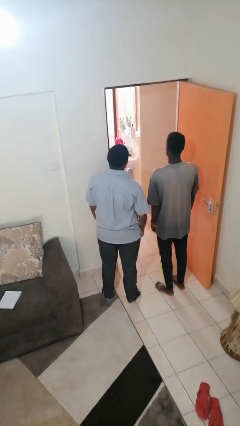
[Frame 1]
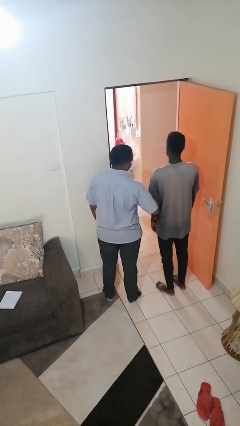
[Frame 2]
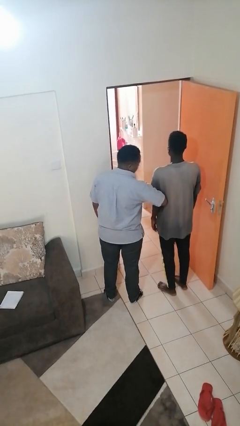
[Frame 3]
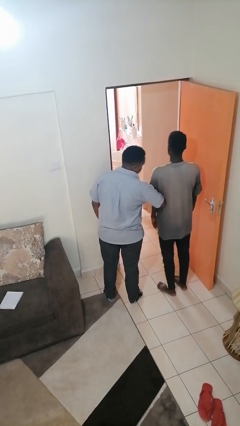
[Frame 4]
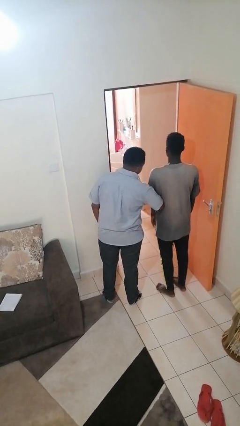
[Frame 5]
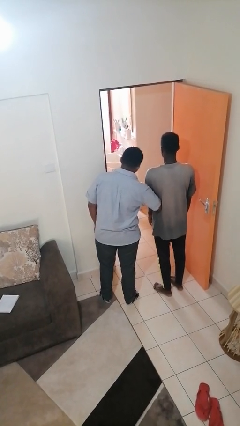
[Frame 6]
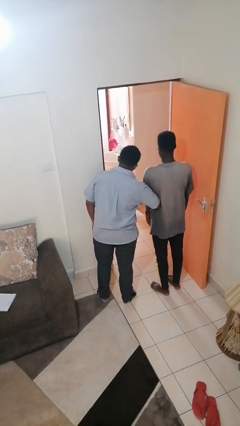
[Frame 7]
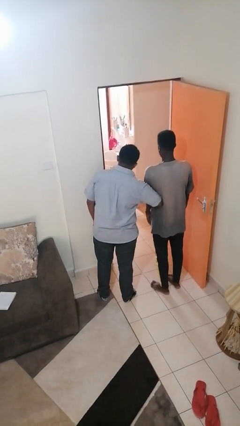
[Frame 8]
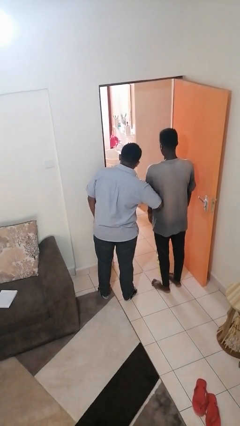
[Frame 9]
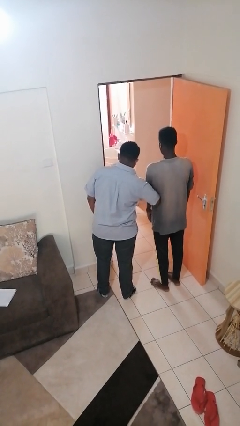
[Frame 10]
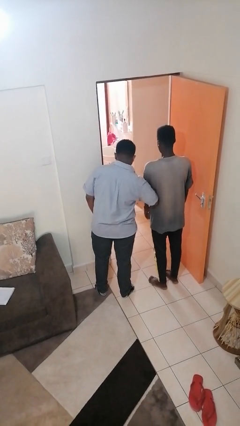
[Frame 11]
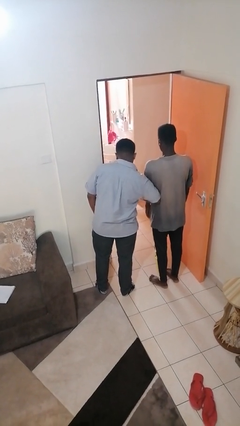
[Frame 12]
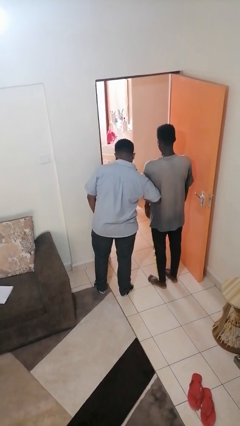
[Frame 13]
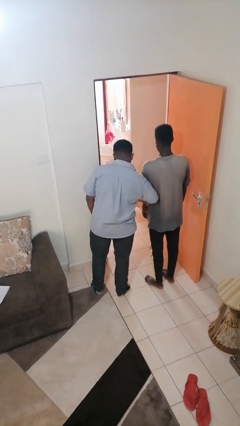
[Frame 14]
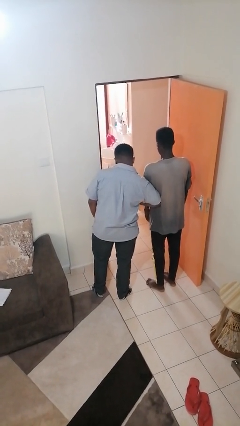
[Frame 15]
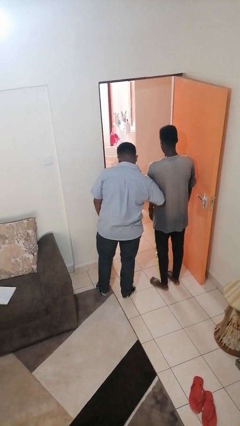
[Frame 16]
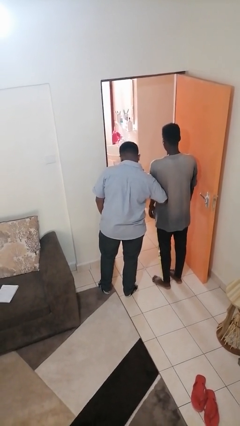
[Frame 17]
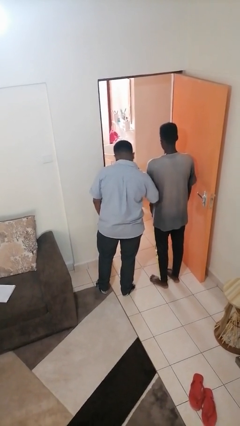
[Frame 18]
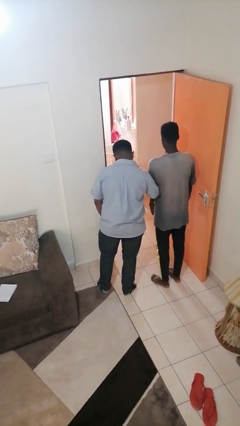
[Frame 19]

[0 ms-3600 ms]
person nudges person with elbow

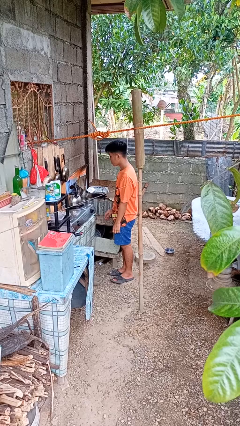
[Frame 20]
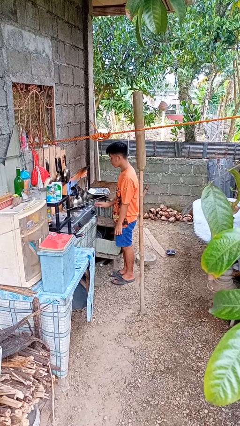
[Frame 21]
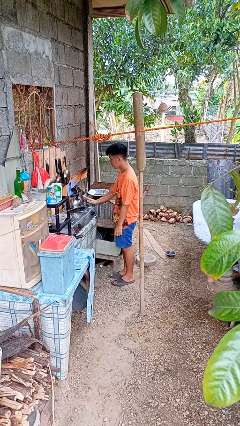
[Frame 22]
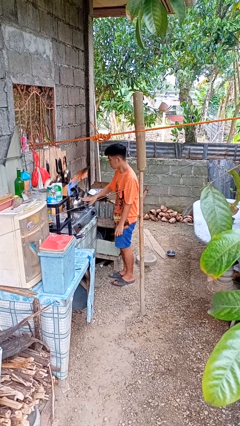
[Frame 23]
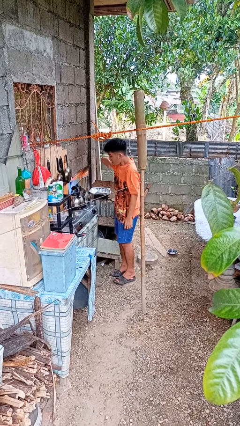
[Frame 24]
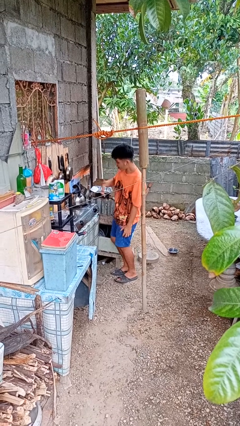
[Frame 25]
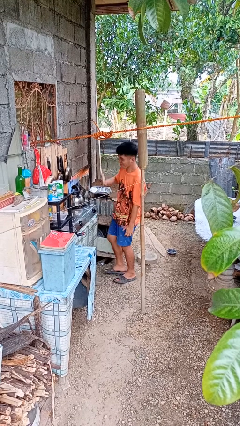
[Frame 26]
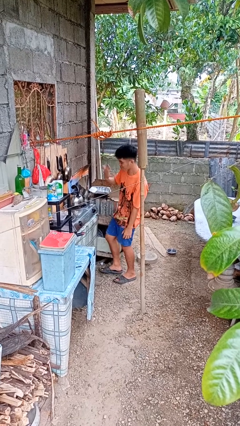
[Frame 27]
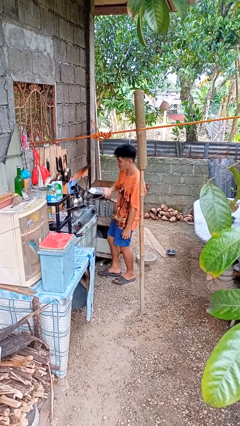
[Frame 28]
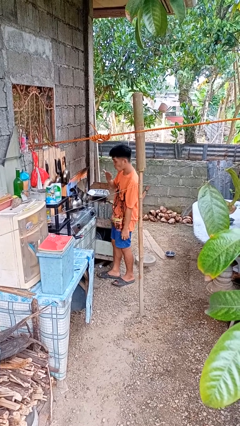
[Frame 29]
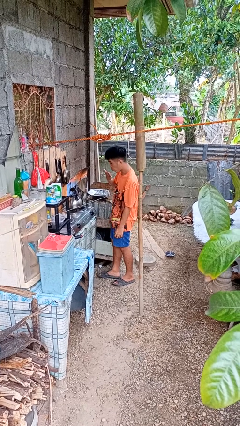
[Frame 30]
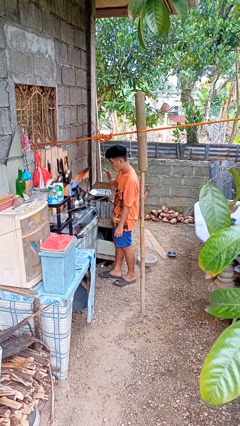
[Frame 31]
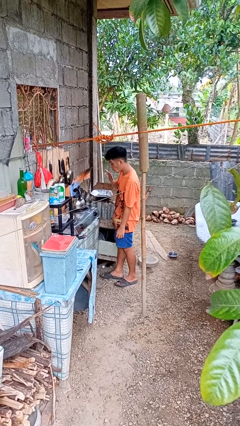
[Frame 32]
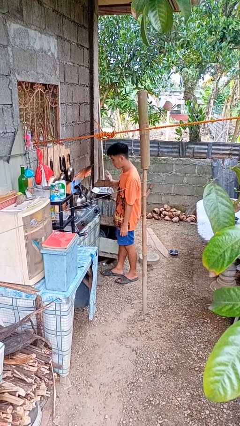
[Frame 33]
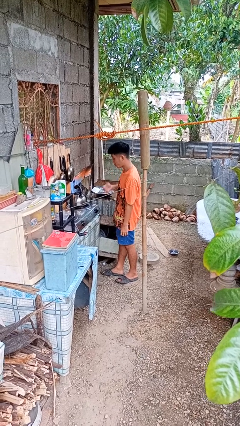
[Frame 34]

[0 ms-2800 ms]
person burns hand

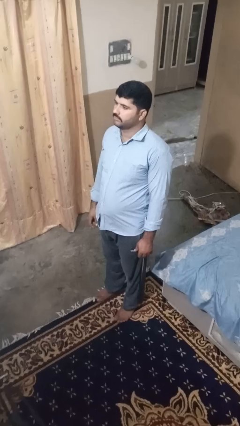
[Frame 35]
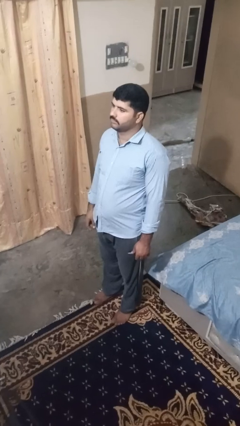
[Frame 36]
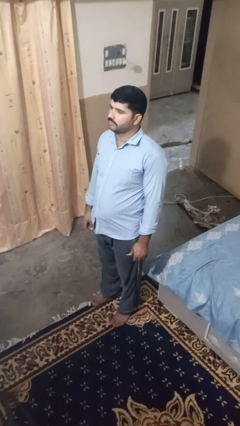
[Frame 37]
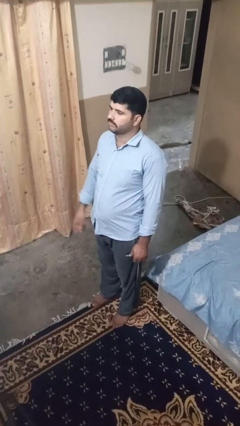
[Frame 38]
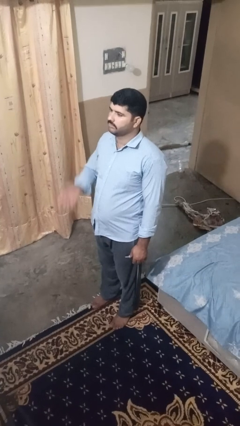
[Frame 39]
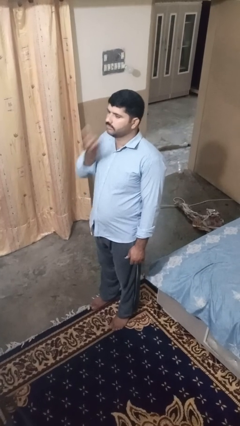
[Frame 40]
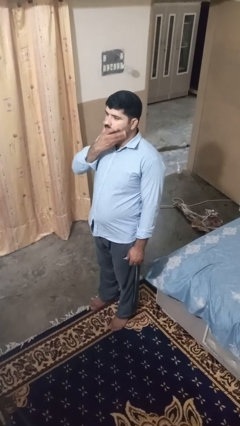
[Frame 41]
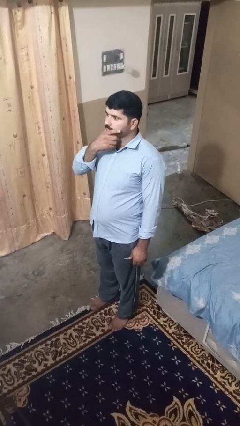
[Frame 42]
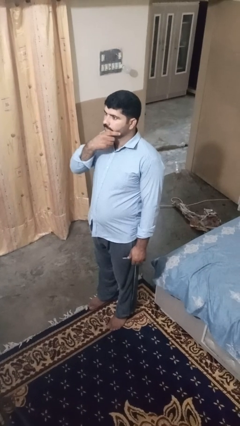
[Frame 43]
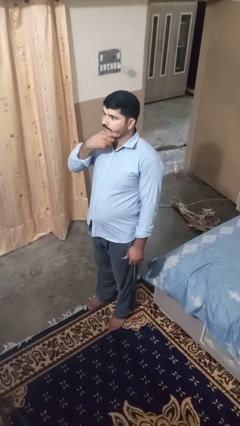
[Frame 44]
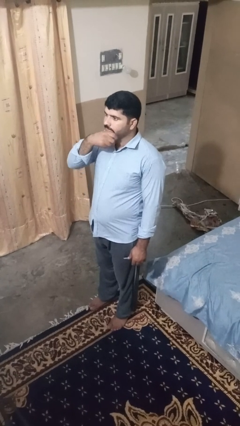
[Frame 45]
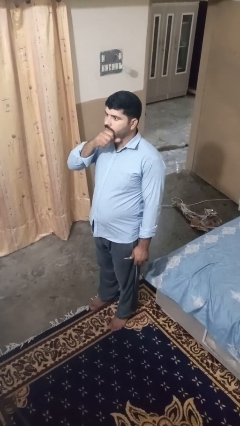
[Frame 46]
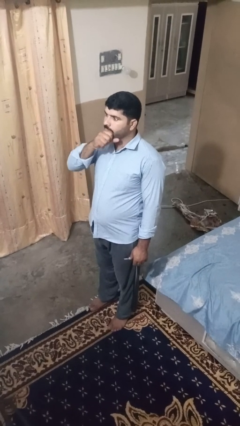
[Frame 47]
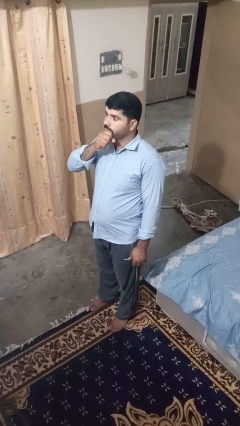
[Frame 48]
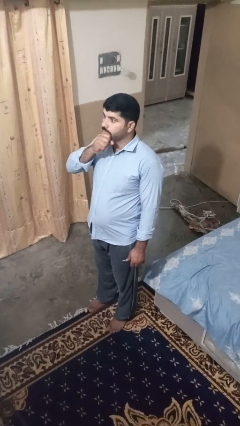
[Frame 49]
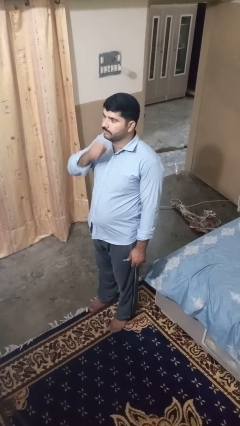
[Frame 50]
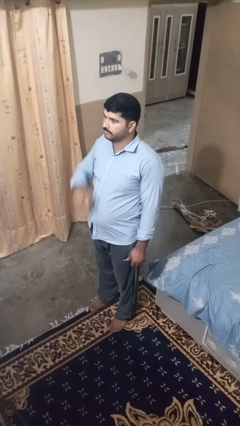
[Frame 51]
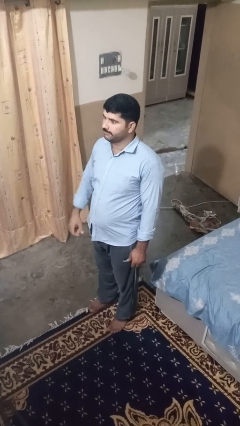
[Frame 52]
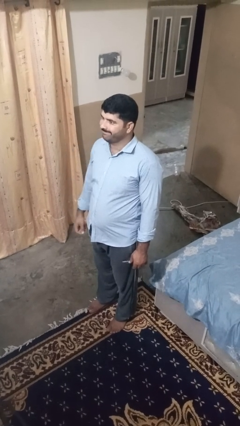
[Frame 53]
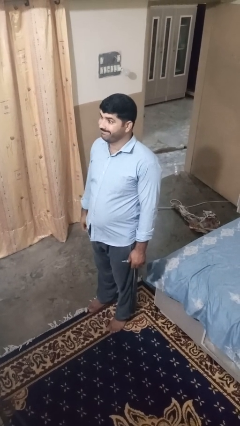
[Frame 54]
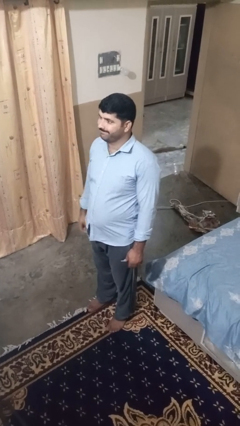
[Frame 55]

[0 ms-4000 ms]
person strokes chin

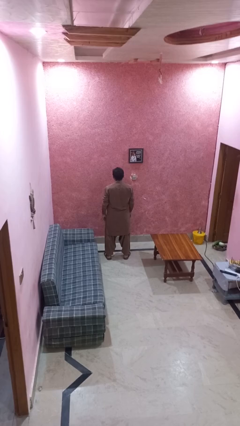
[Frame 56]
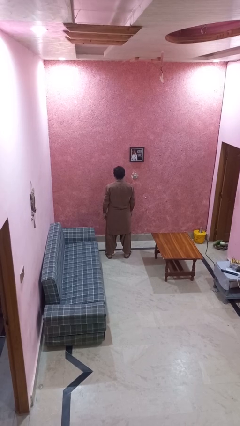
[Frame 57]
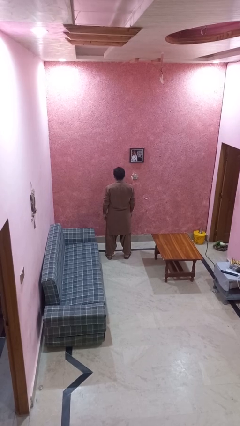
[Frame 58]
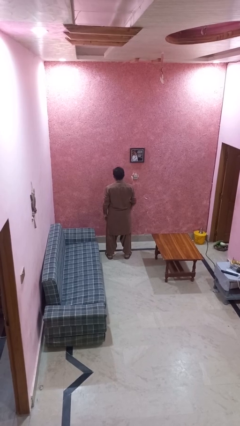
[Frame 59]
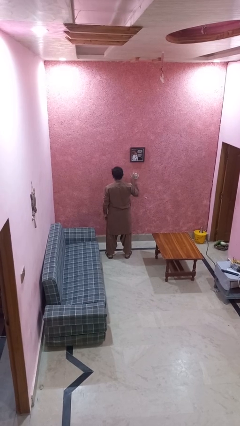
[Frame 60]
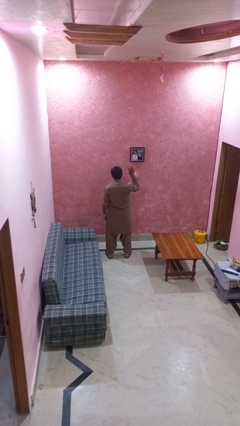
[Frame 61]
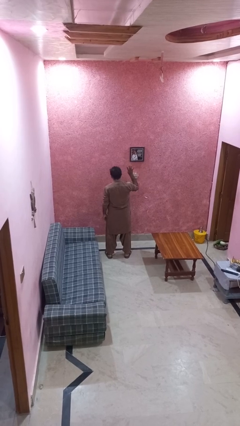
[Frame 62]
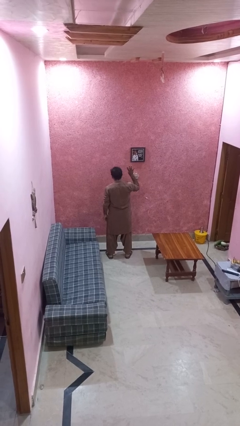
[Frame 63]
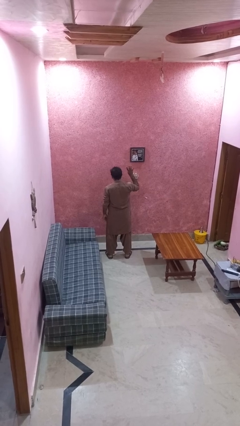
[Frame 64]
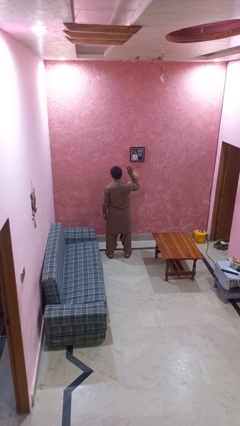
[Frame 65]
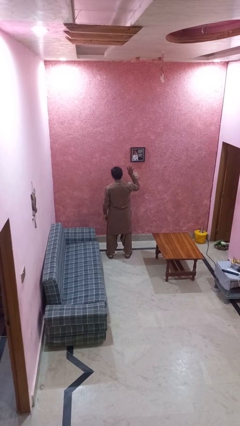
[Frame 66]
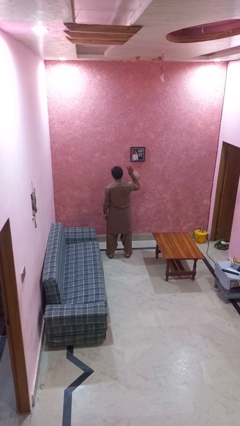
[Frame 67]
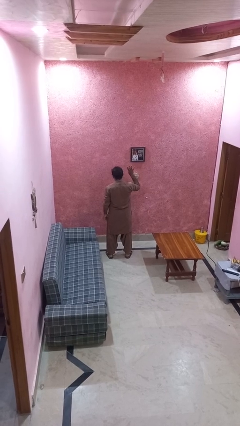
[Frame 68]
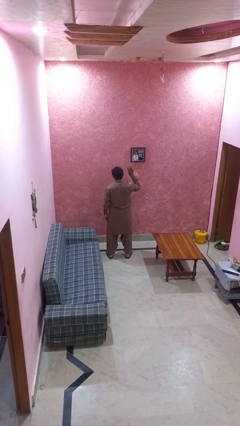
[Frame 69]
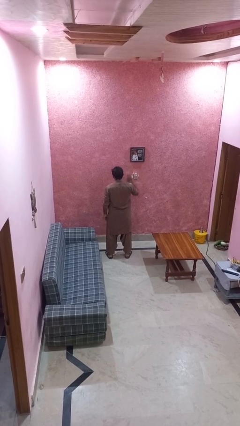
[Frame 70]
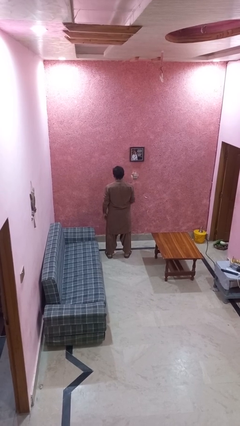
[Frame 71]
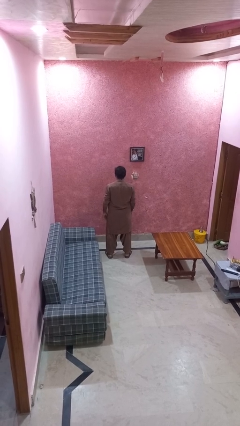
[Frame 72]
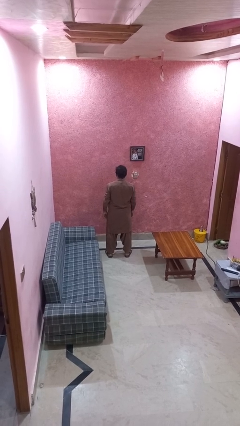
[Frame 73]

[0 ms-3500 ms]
person gestures number four

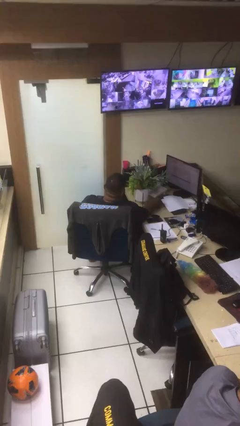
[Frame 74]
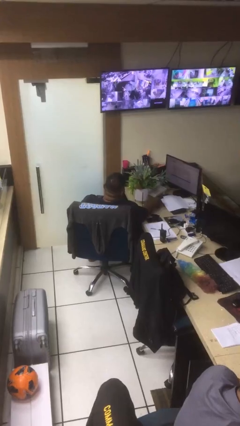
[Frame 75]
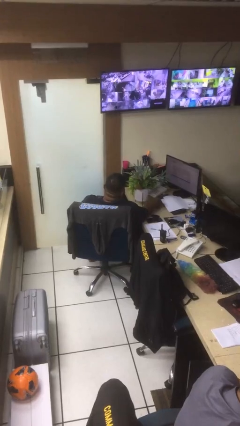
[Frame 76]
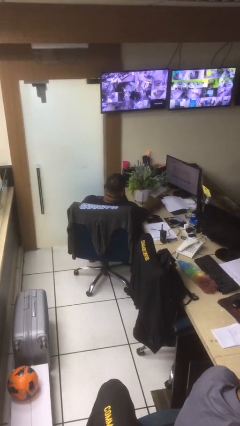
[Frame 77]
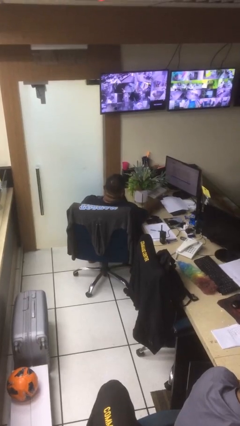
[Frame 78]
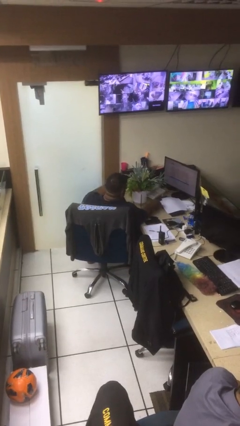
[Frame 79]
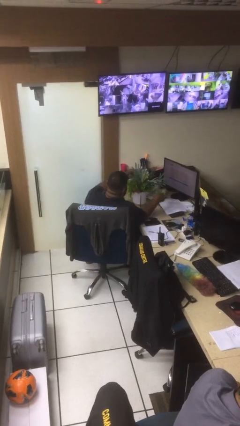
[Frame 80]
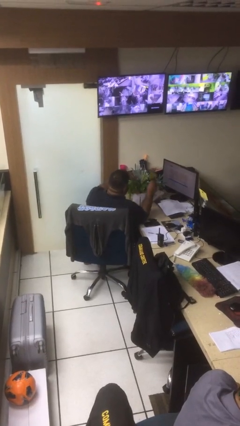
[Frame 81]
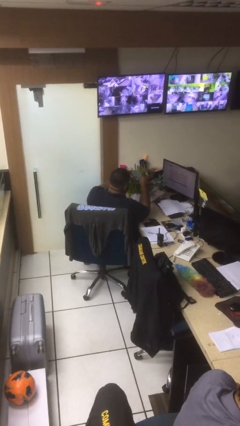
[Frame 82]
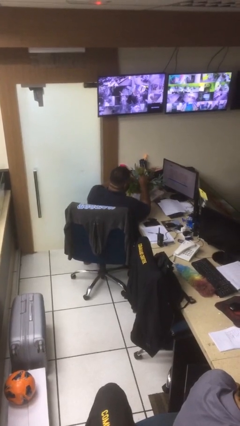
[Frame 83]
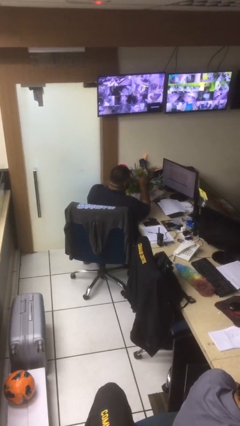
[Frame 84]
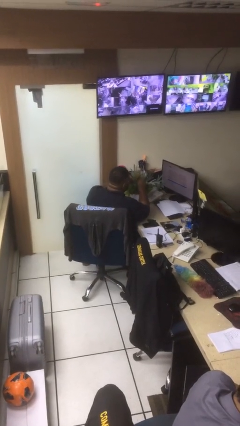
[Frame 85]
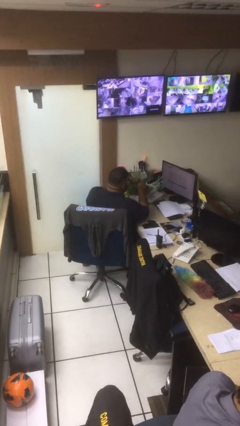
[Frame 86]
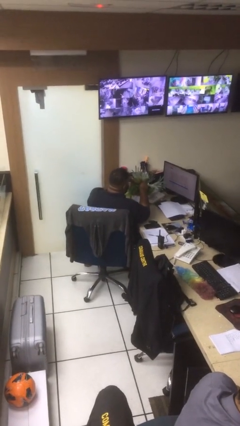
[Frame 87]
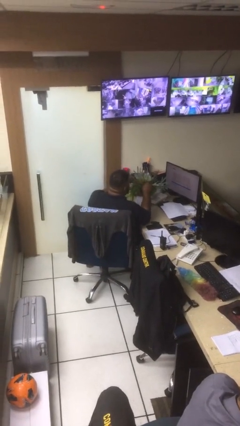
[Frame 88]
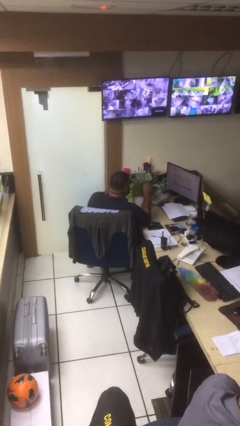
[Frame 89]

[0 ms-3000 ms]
person arranges flowers in vase

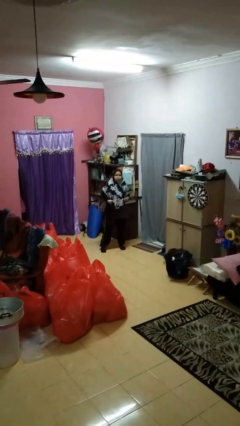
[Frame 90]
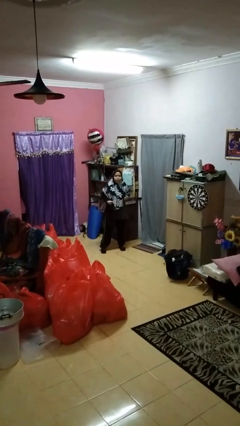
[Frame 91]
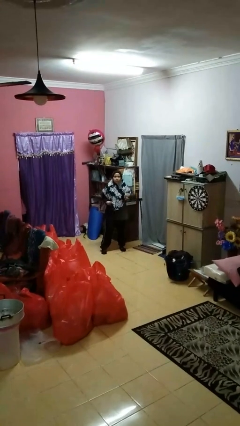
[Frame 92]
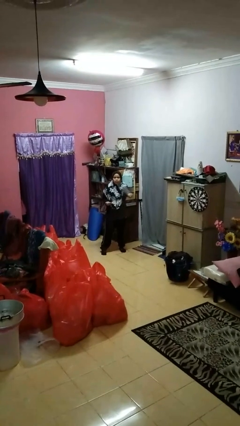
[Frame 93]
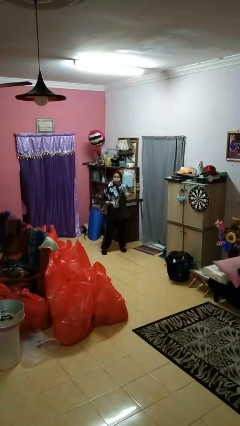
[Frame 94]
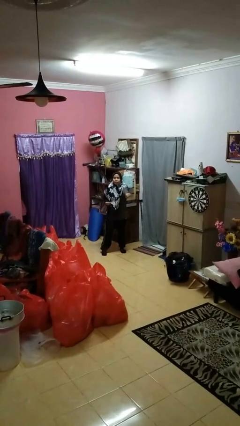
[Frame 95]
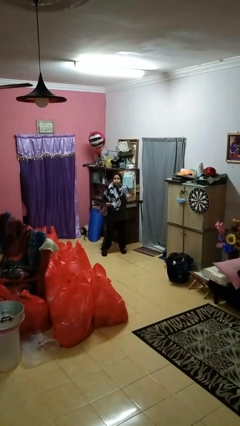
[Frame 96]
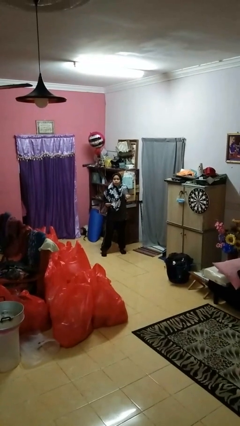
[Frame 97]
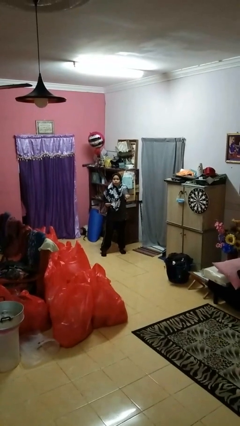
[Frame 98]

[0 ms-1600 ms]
person punches
